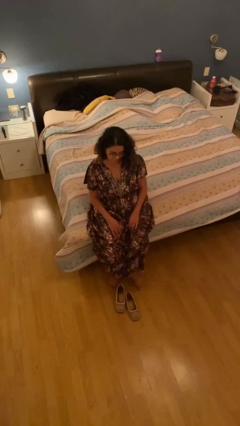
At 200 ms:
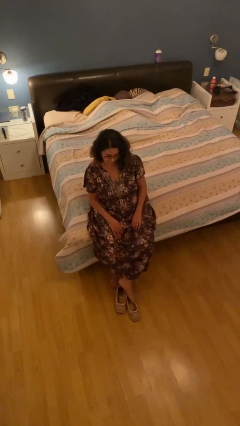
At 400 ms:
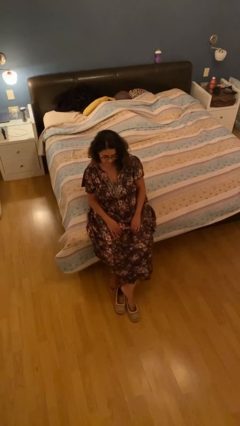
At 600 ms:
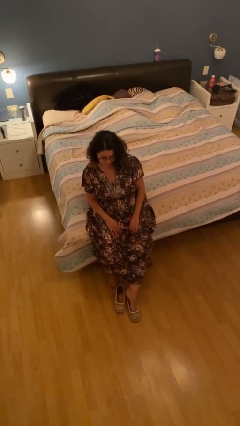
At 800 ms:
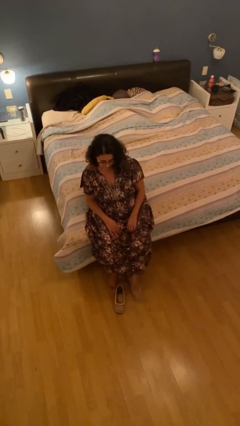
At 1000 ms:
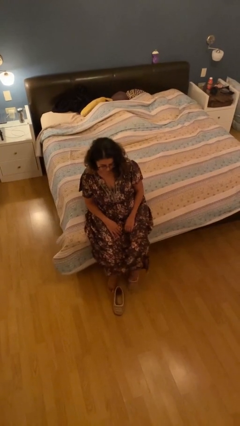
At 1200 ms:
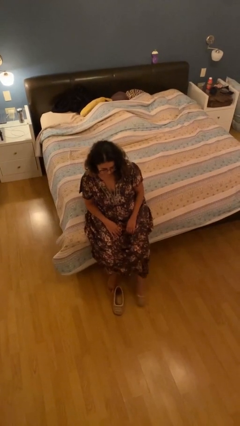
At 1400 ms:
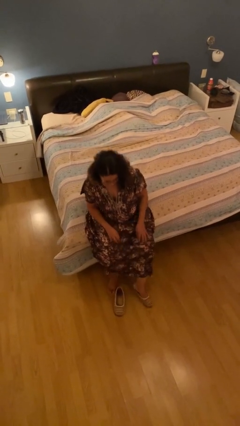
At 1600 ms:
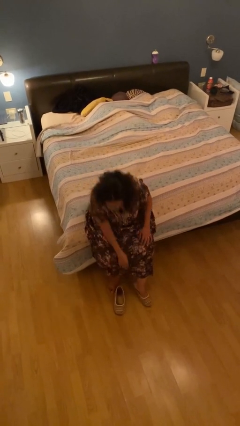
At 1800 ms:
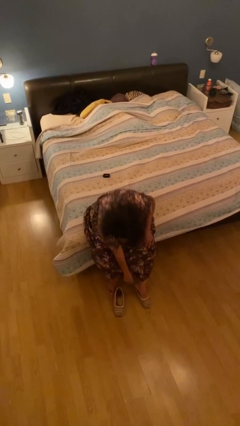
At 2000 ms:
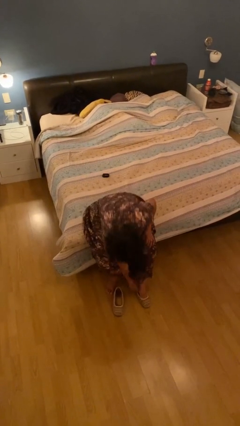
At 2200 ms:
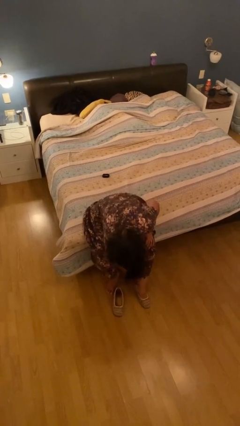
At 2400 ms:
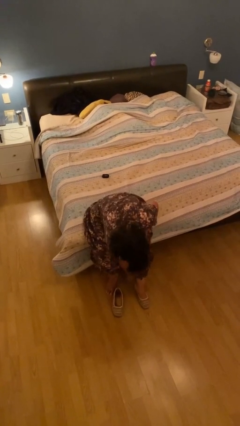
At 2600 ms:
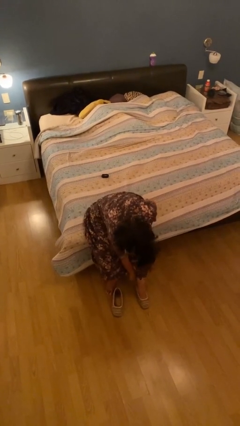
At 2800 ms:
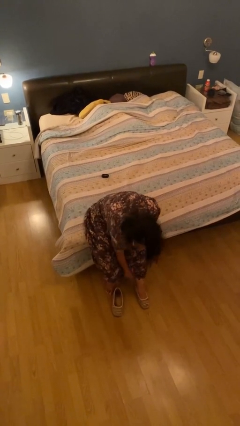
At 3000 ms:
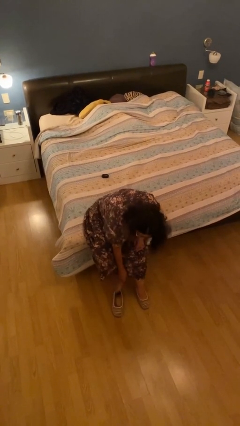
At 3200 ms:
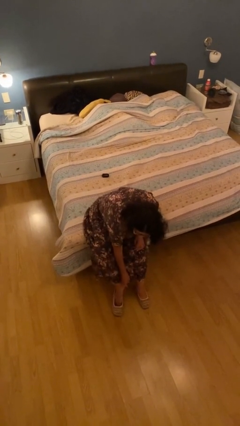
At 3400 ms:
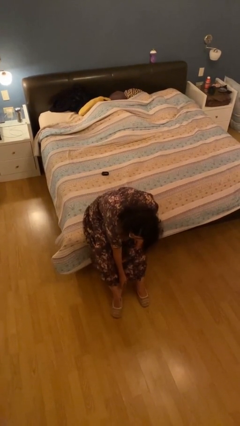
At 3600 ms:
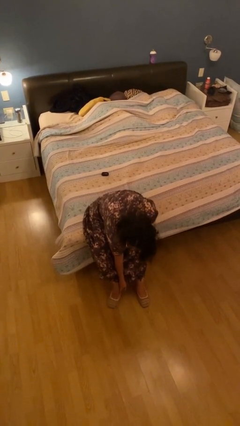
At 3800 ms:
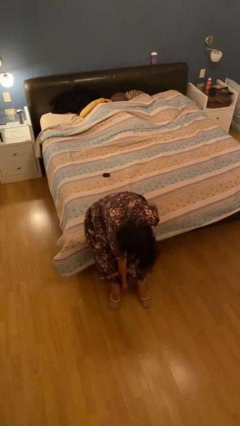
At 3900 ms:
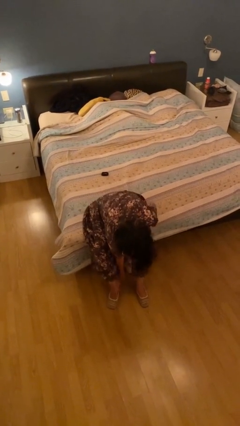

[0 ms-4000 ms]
person puts on shoes

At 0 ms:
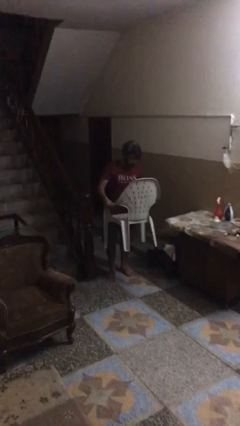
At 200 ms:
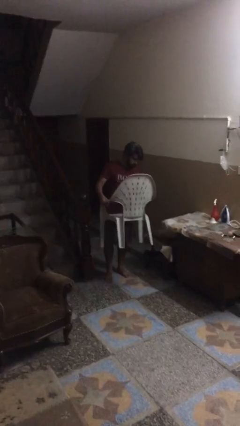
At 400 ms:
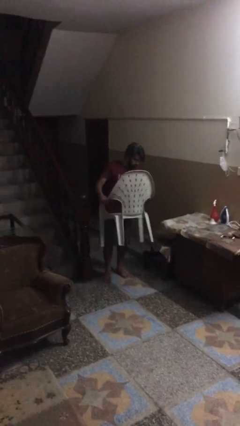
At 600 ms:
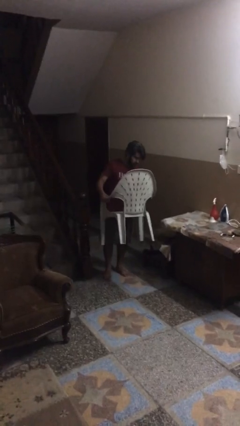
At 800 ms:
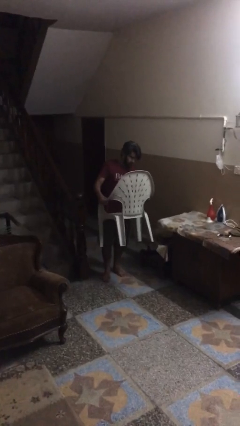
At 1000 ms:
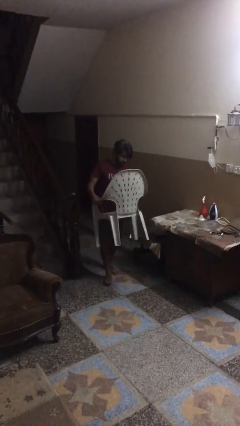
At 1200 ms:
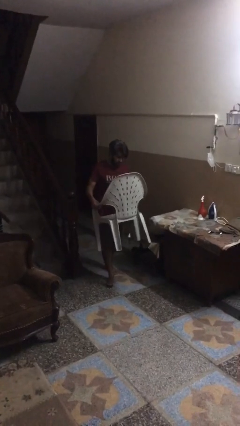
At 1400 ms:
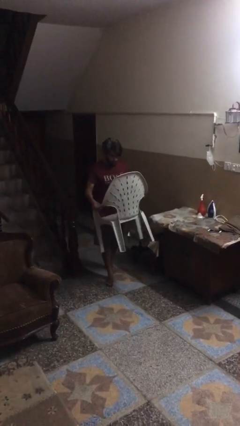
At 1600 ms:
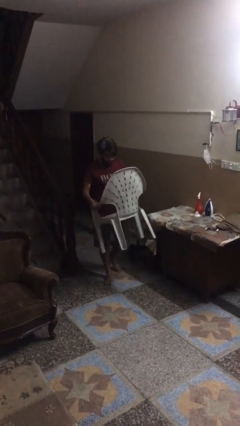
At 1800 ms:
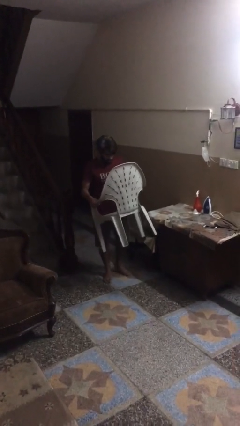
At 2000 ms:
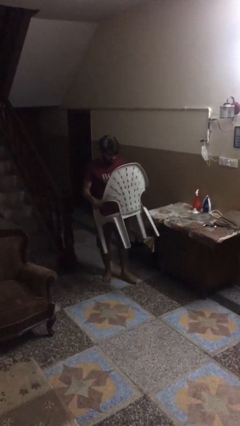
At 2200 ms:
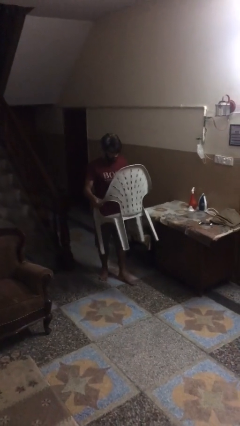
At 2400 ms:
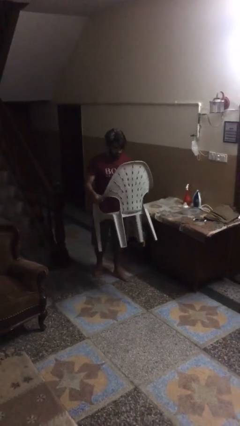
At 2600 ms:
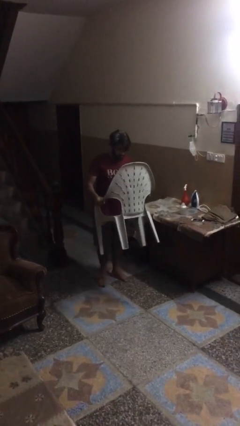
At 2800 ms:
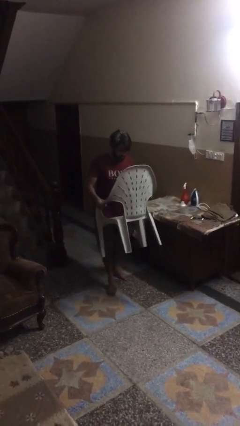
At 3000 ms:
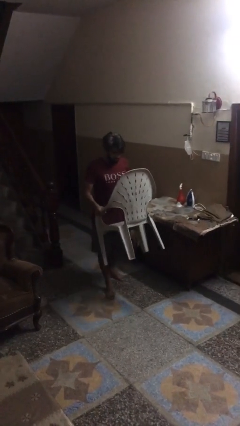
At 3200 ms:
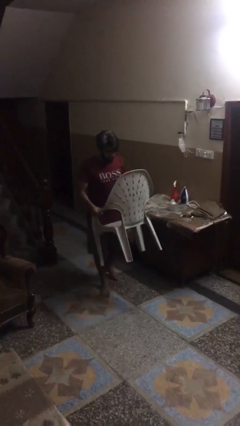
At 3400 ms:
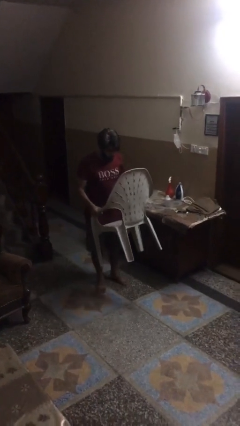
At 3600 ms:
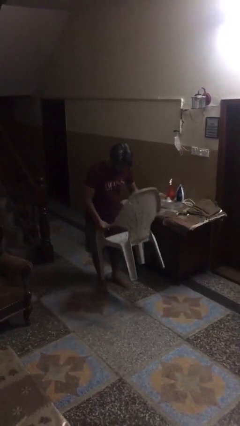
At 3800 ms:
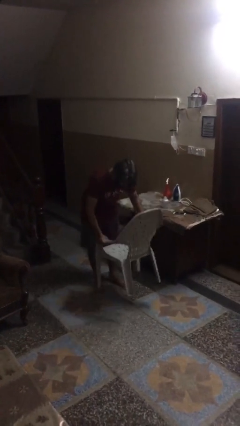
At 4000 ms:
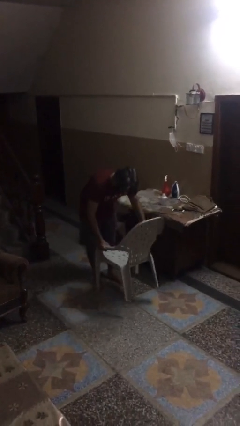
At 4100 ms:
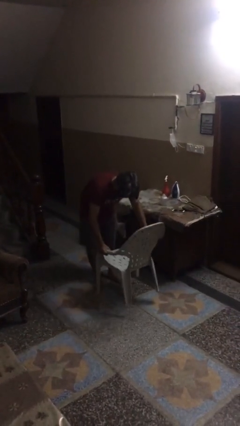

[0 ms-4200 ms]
person carries heavy object

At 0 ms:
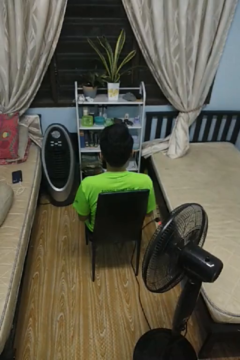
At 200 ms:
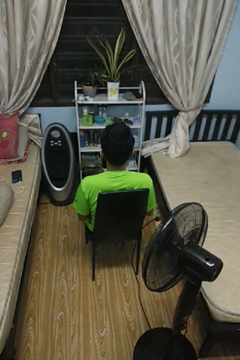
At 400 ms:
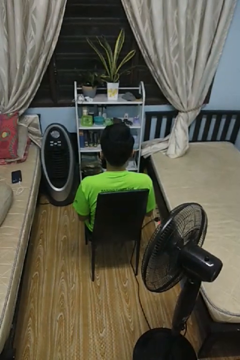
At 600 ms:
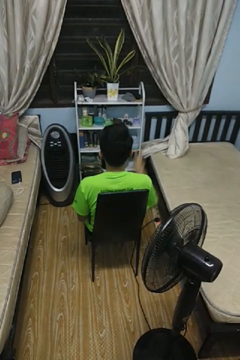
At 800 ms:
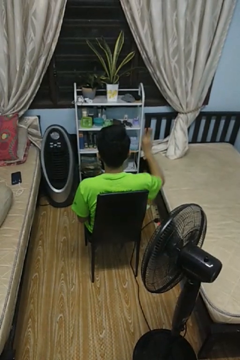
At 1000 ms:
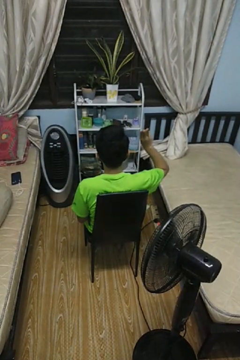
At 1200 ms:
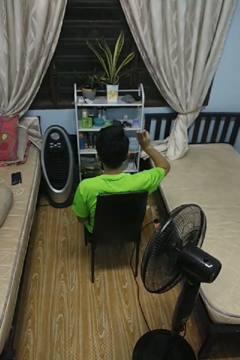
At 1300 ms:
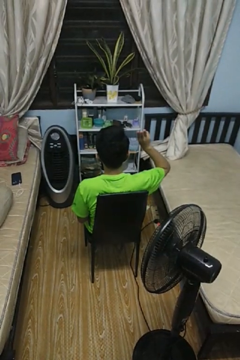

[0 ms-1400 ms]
person gestures number three

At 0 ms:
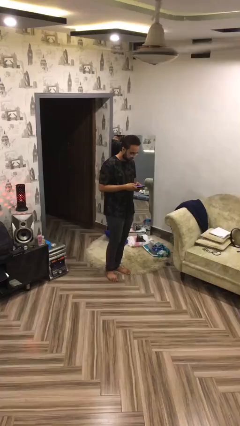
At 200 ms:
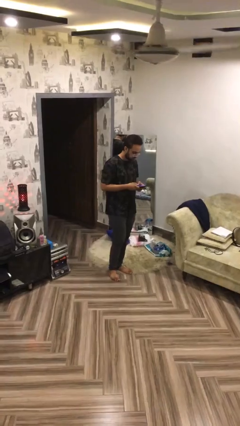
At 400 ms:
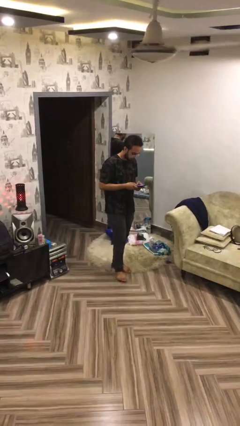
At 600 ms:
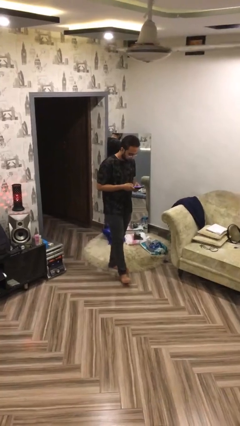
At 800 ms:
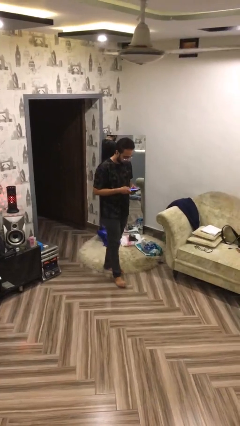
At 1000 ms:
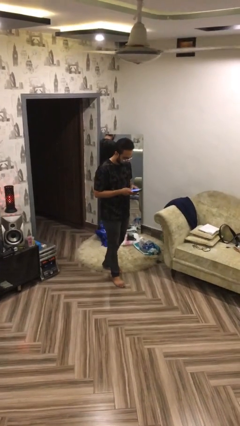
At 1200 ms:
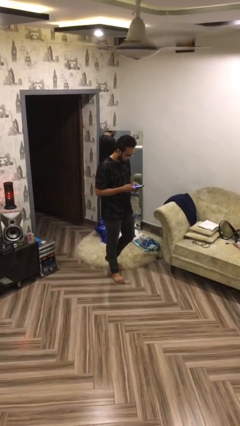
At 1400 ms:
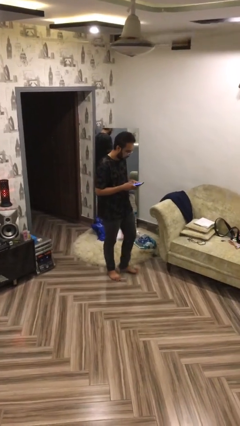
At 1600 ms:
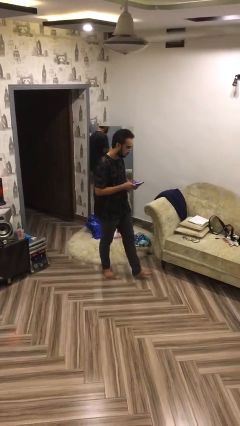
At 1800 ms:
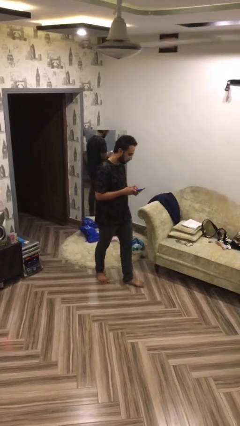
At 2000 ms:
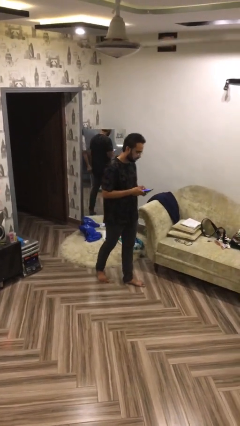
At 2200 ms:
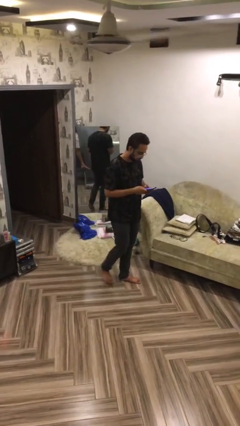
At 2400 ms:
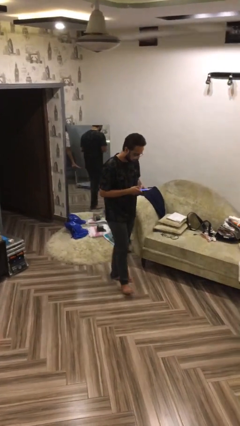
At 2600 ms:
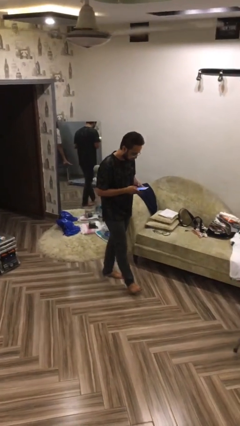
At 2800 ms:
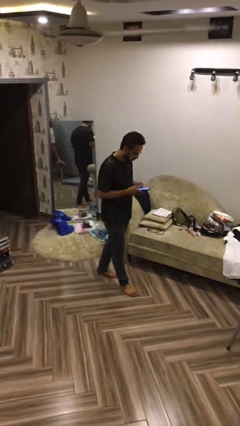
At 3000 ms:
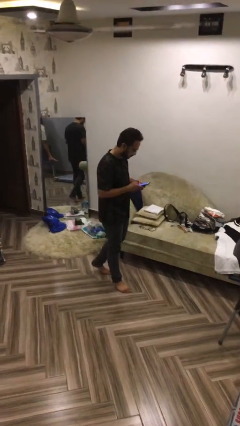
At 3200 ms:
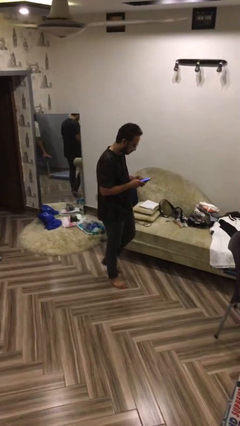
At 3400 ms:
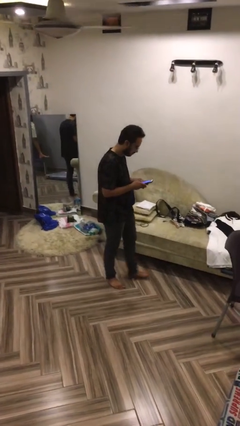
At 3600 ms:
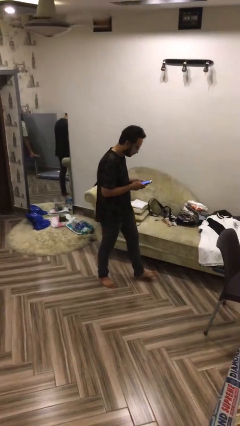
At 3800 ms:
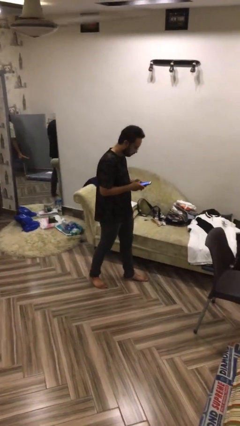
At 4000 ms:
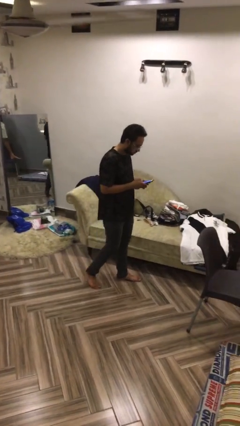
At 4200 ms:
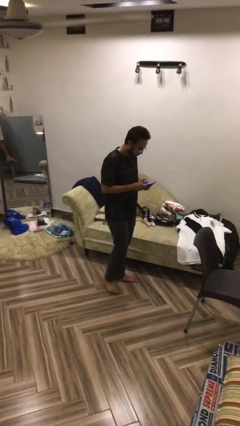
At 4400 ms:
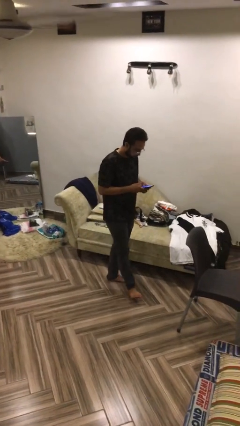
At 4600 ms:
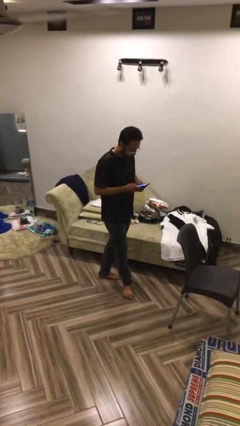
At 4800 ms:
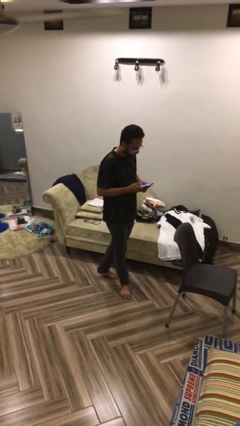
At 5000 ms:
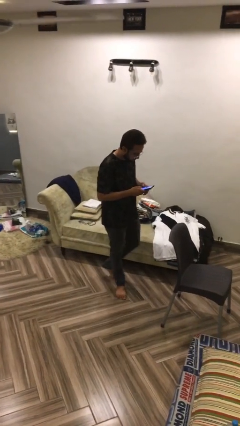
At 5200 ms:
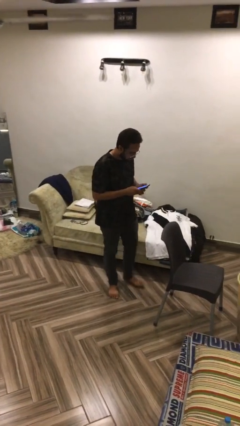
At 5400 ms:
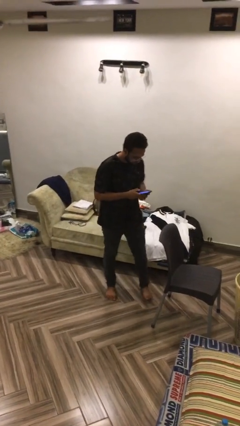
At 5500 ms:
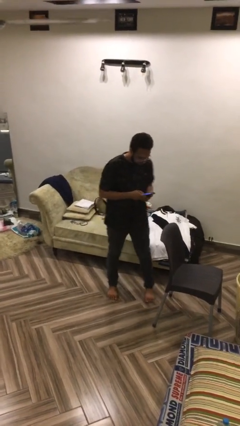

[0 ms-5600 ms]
person texts on phone

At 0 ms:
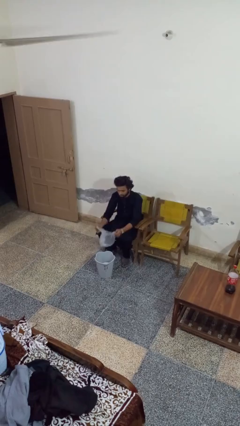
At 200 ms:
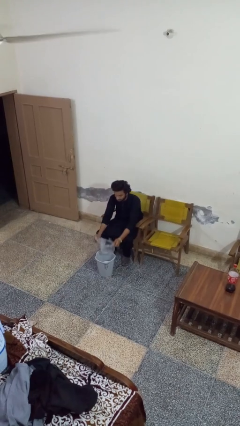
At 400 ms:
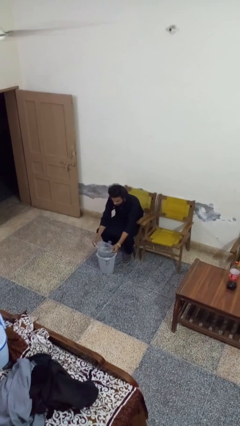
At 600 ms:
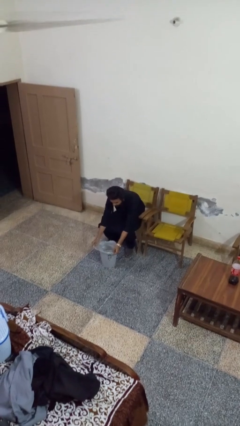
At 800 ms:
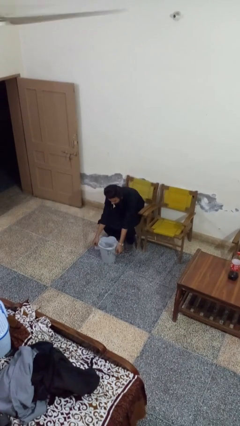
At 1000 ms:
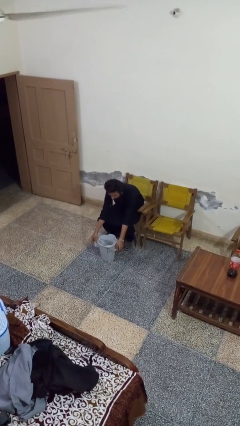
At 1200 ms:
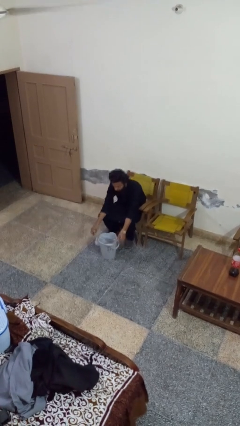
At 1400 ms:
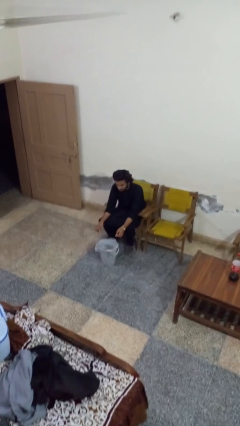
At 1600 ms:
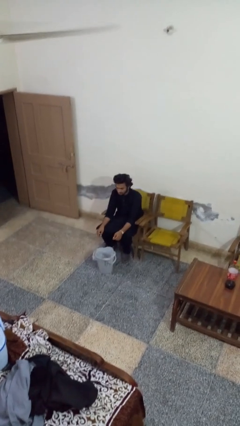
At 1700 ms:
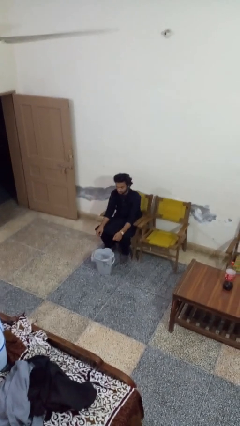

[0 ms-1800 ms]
person inserts trashbag into trashcan

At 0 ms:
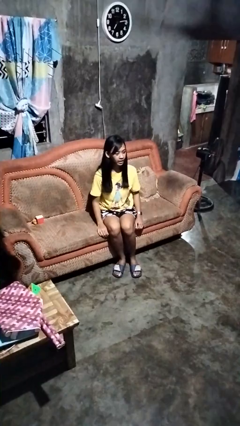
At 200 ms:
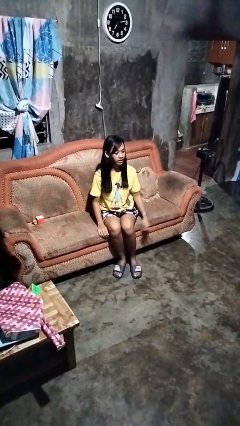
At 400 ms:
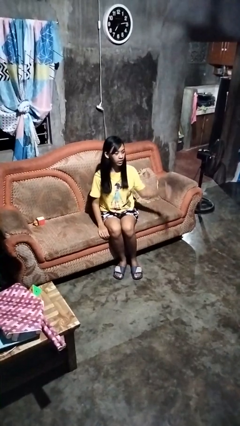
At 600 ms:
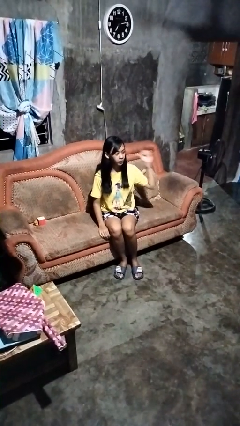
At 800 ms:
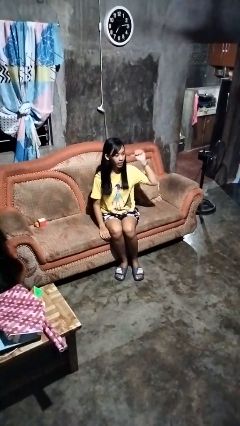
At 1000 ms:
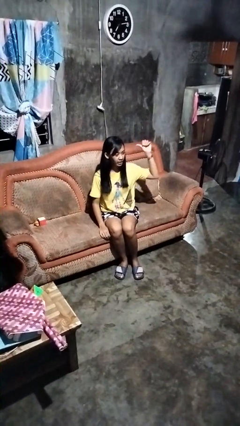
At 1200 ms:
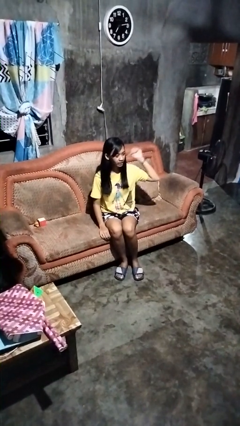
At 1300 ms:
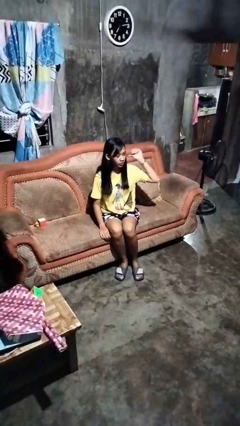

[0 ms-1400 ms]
person gestures behind me
